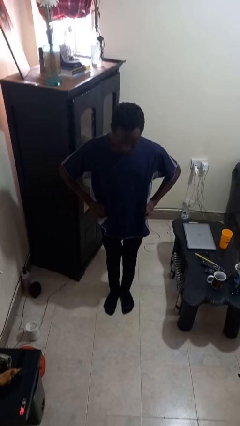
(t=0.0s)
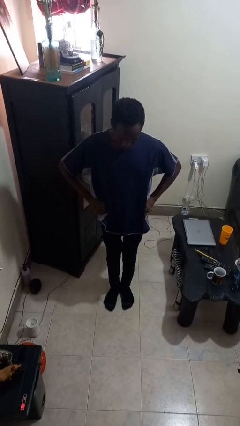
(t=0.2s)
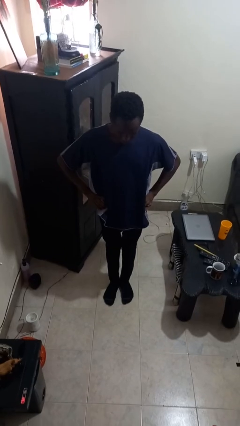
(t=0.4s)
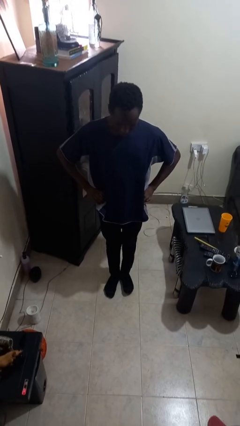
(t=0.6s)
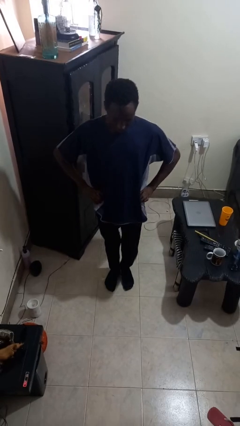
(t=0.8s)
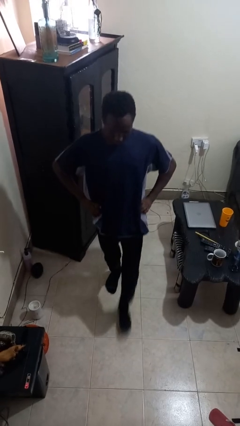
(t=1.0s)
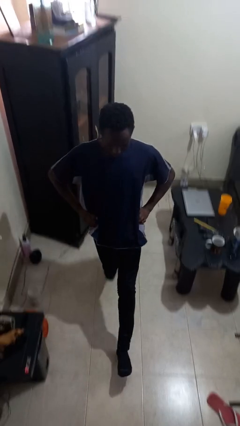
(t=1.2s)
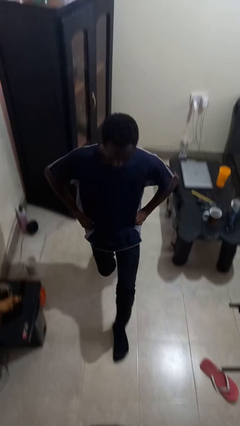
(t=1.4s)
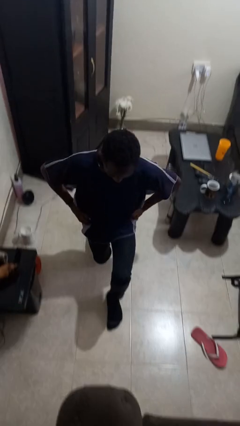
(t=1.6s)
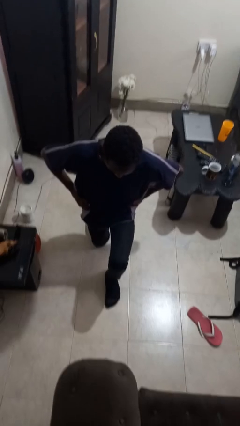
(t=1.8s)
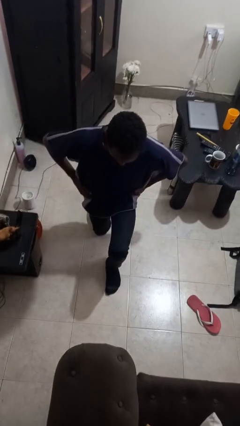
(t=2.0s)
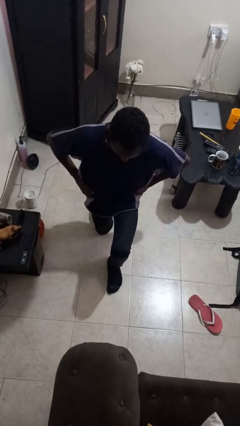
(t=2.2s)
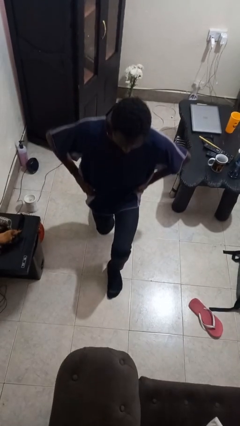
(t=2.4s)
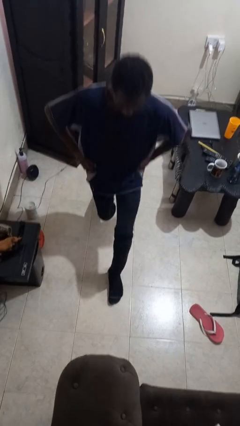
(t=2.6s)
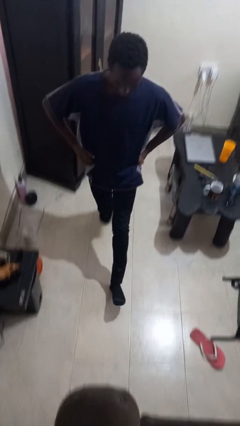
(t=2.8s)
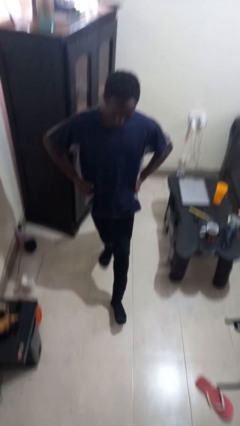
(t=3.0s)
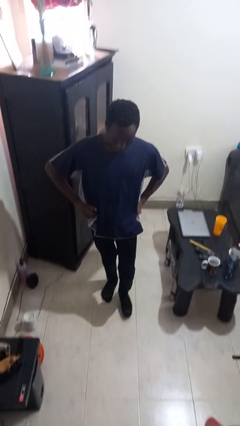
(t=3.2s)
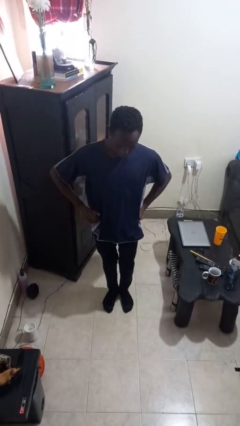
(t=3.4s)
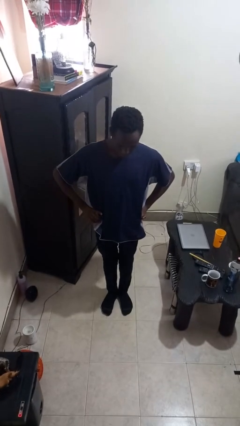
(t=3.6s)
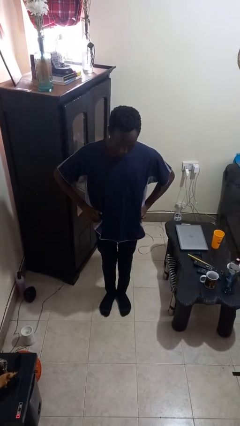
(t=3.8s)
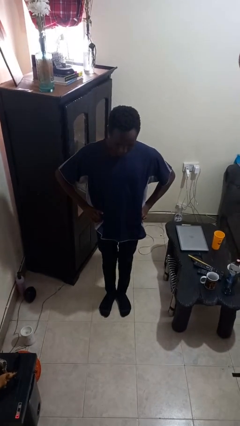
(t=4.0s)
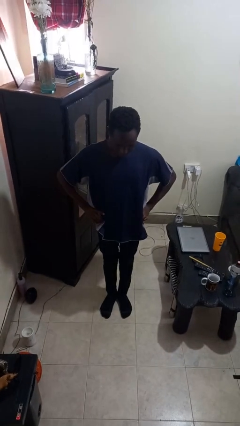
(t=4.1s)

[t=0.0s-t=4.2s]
person exercises with lunges

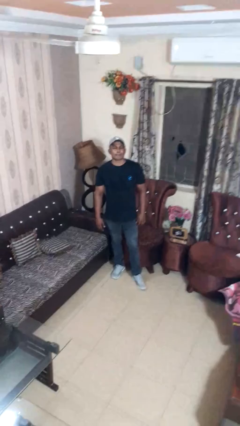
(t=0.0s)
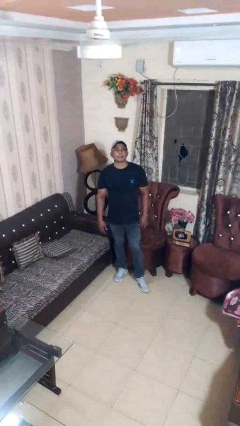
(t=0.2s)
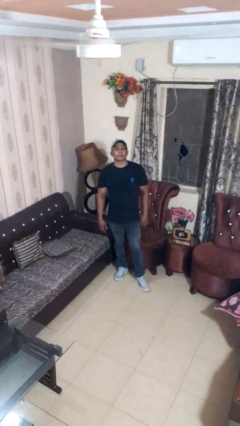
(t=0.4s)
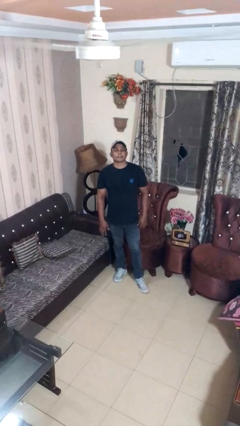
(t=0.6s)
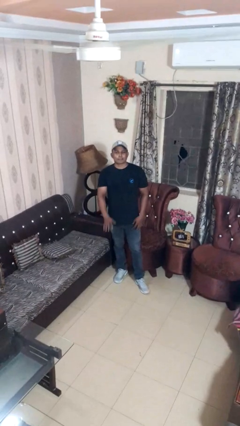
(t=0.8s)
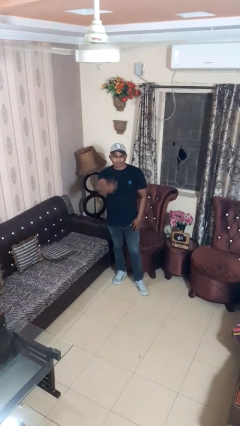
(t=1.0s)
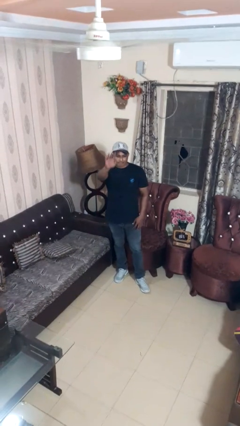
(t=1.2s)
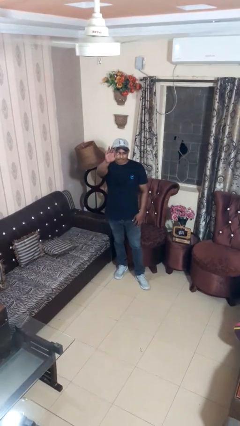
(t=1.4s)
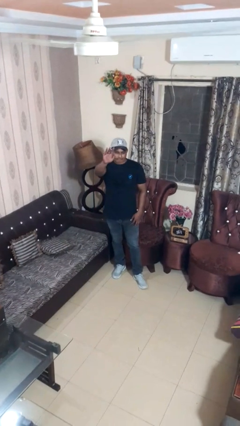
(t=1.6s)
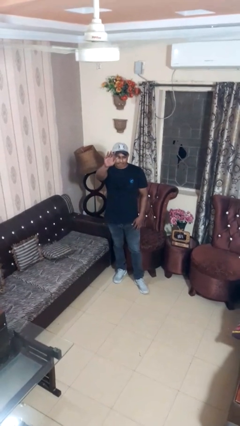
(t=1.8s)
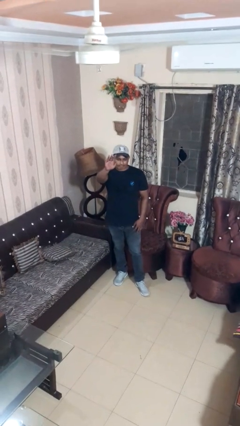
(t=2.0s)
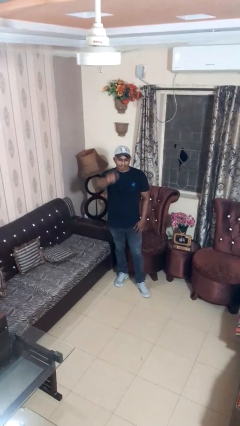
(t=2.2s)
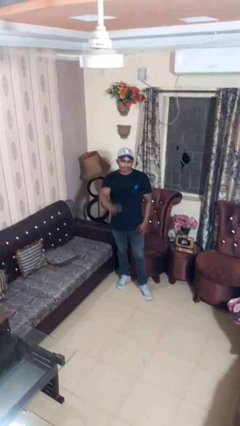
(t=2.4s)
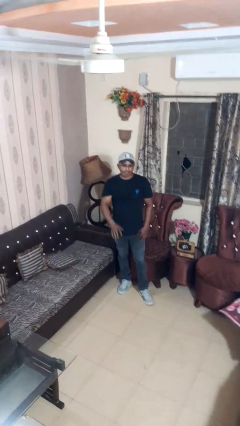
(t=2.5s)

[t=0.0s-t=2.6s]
person gestures swipe up

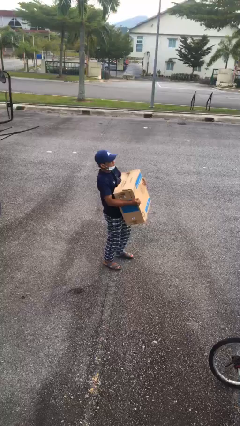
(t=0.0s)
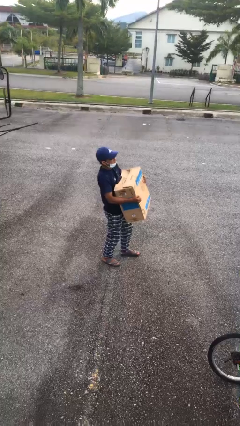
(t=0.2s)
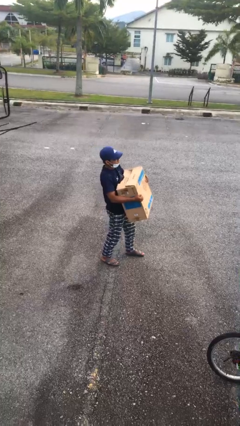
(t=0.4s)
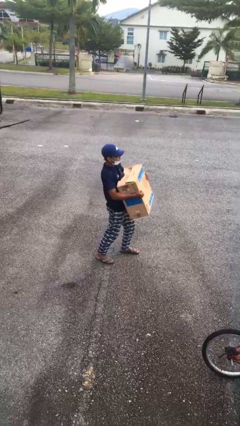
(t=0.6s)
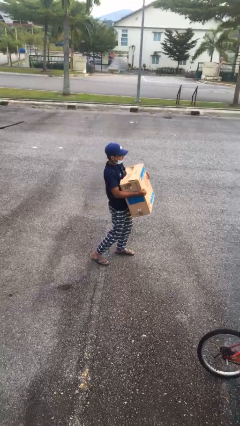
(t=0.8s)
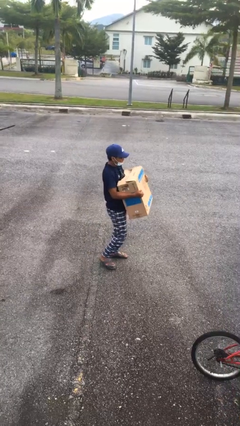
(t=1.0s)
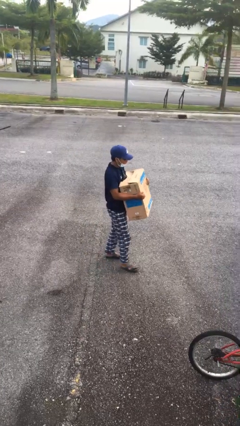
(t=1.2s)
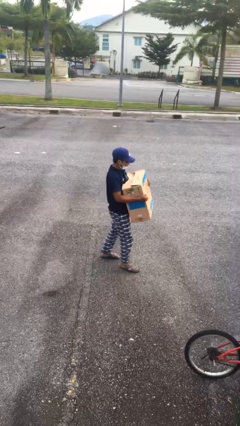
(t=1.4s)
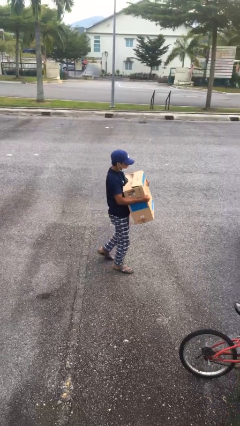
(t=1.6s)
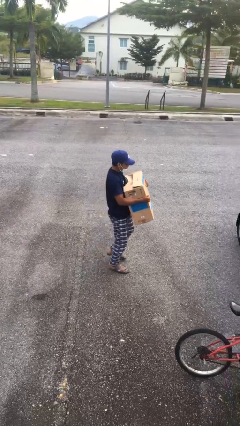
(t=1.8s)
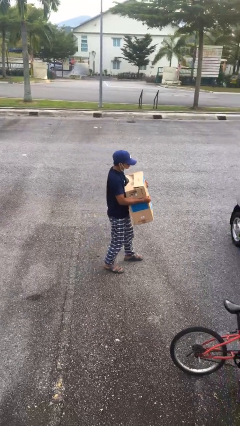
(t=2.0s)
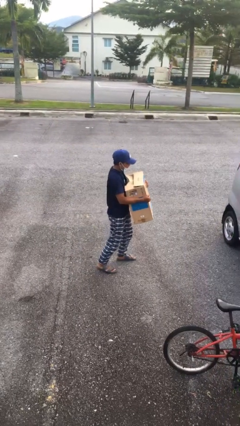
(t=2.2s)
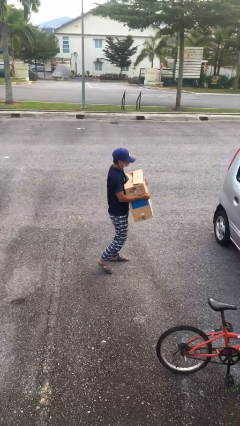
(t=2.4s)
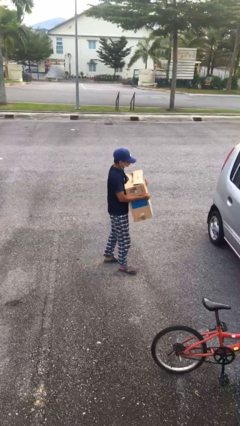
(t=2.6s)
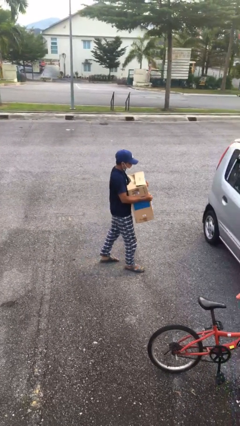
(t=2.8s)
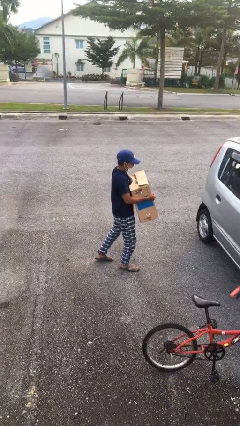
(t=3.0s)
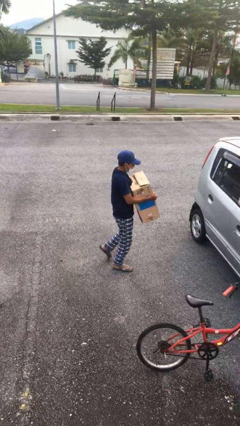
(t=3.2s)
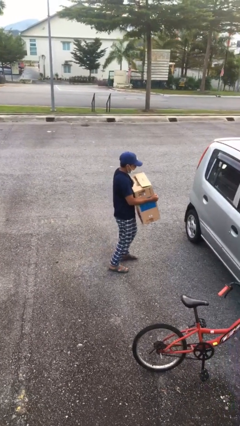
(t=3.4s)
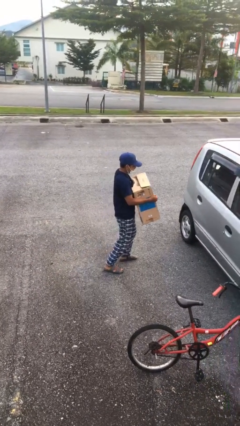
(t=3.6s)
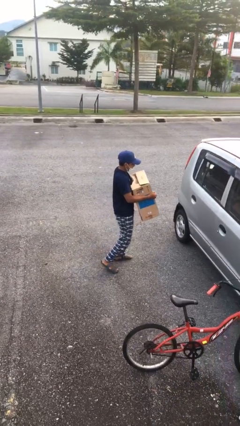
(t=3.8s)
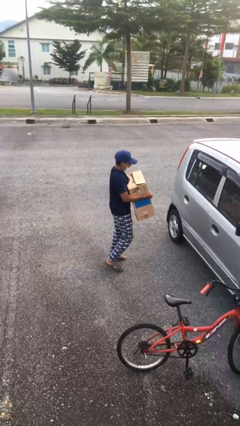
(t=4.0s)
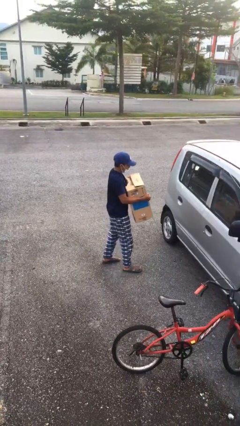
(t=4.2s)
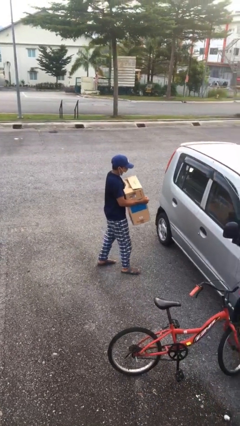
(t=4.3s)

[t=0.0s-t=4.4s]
person carries heavy object

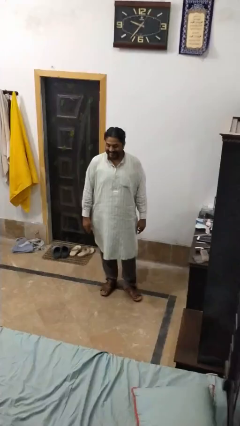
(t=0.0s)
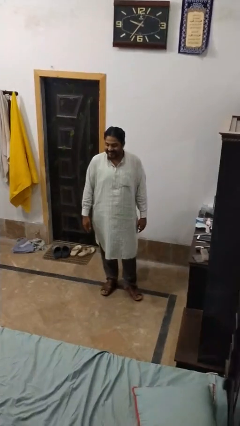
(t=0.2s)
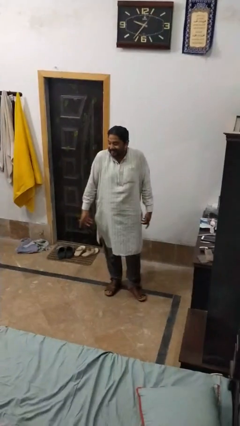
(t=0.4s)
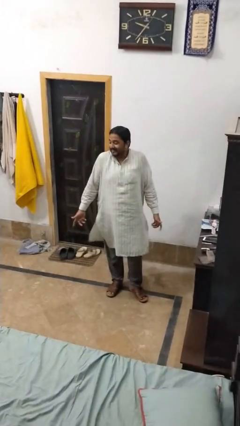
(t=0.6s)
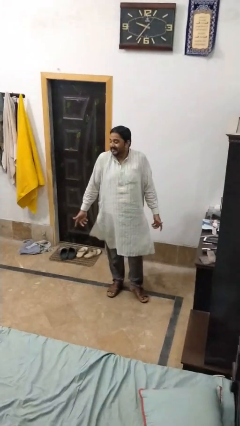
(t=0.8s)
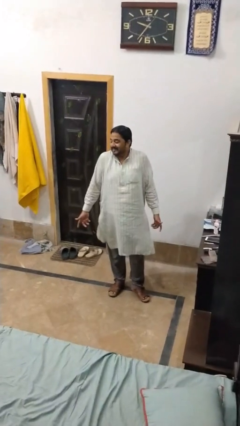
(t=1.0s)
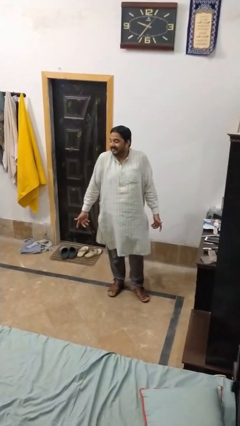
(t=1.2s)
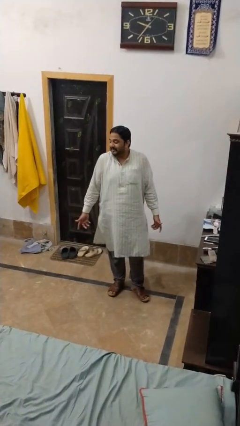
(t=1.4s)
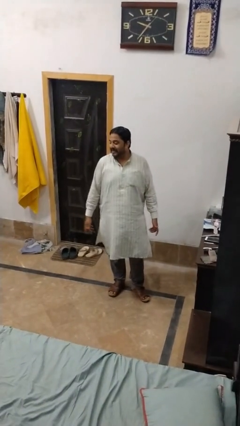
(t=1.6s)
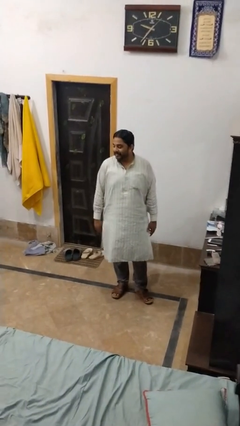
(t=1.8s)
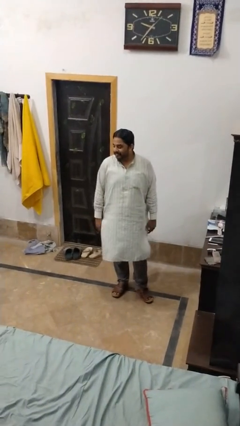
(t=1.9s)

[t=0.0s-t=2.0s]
person shrugs

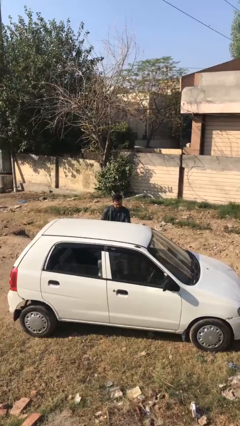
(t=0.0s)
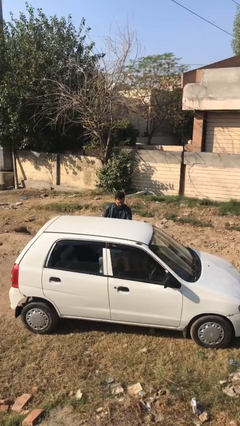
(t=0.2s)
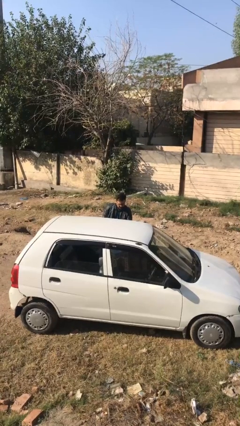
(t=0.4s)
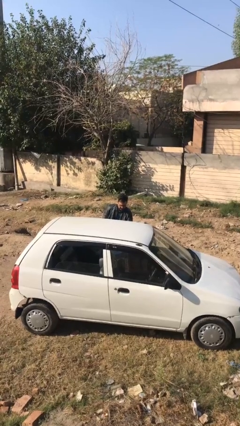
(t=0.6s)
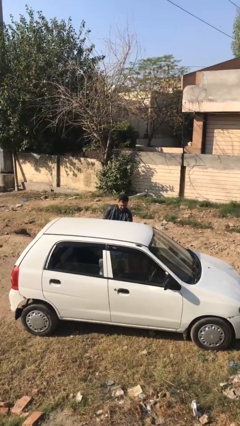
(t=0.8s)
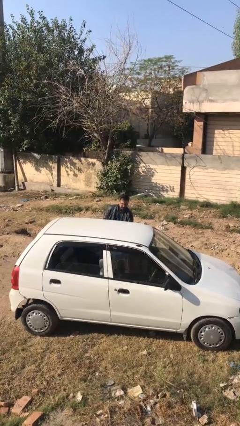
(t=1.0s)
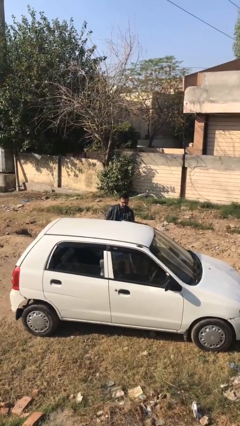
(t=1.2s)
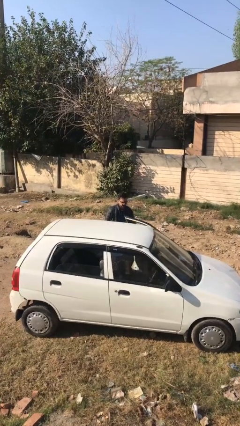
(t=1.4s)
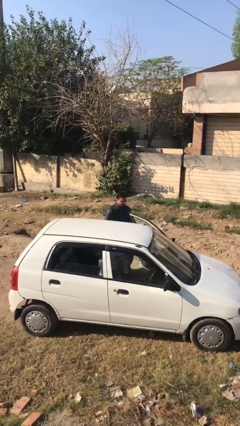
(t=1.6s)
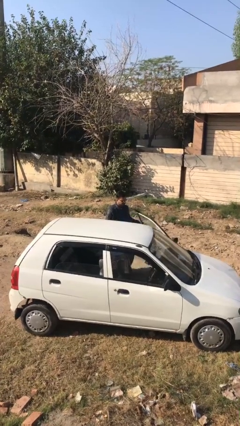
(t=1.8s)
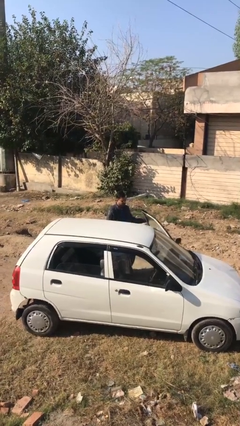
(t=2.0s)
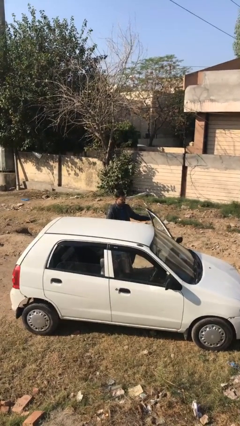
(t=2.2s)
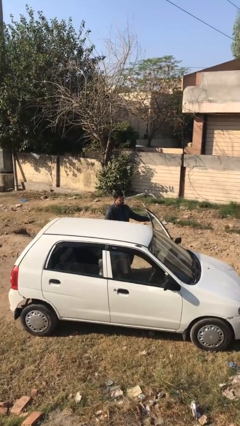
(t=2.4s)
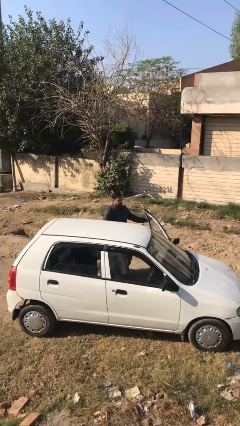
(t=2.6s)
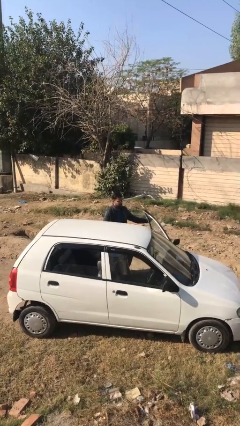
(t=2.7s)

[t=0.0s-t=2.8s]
person opens car door

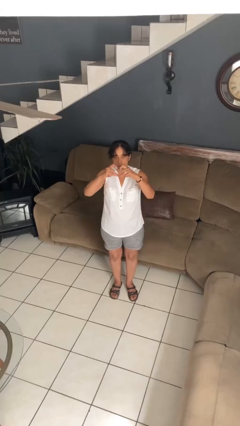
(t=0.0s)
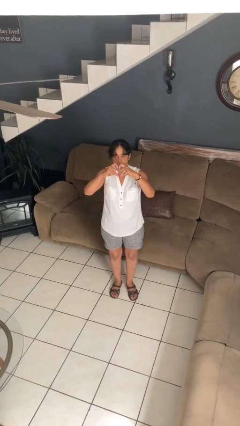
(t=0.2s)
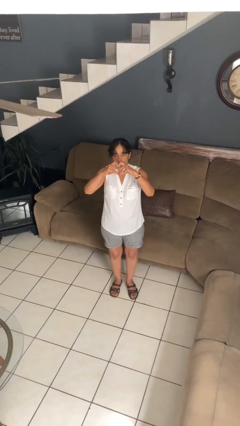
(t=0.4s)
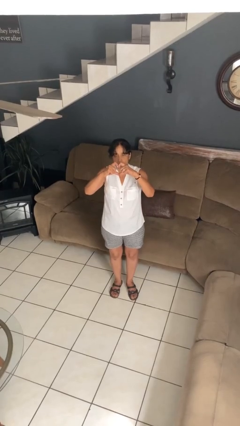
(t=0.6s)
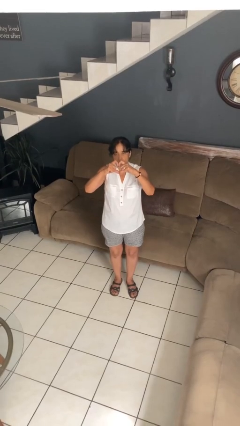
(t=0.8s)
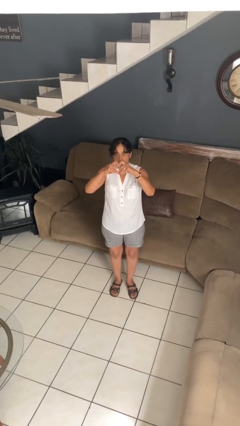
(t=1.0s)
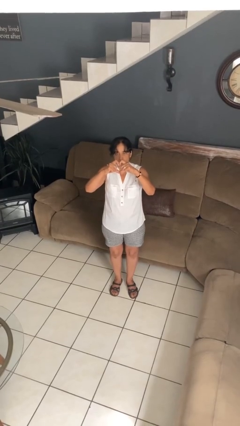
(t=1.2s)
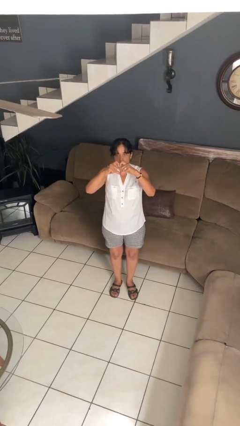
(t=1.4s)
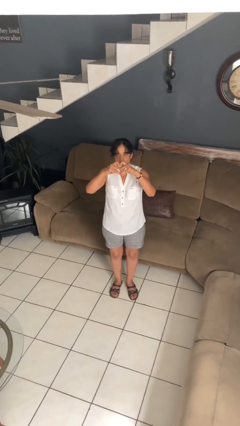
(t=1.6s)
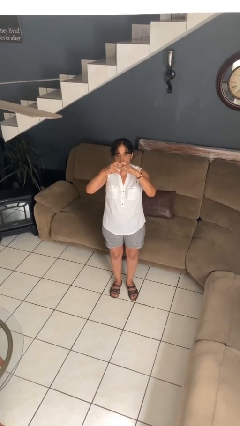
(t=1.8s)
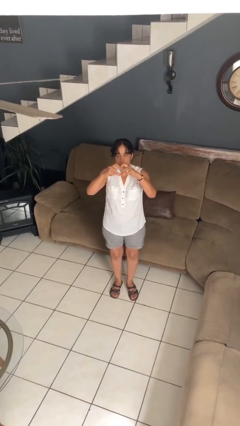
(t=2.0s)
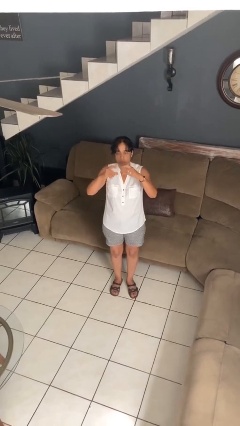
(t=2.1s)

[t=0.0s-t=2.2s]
person gestures heart
